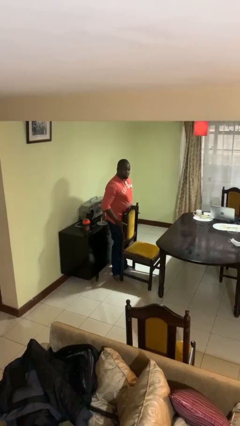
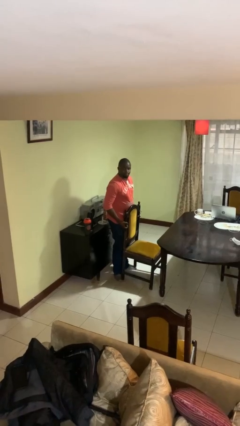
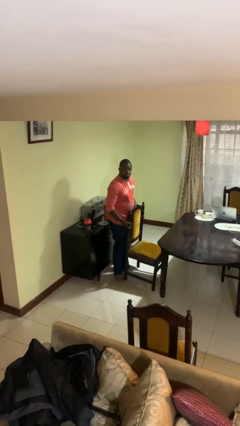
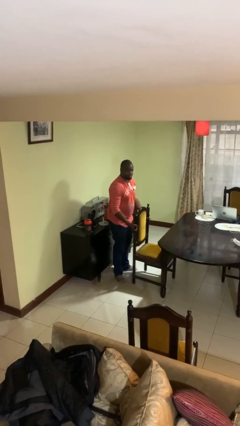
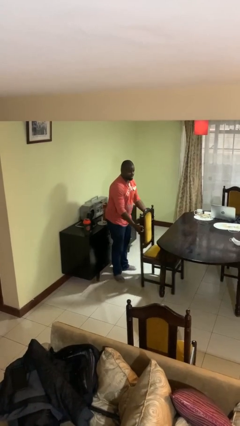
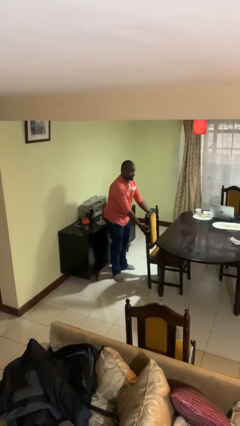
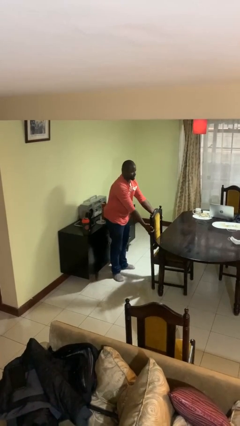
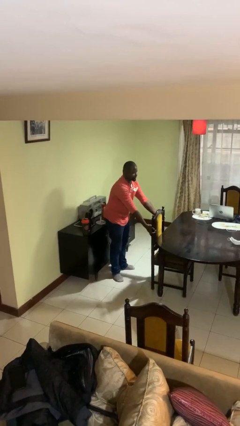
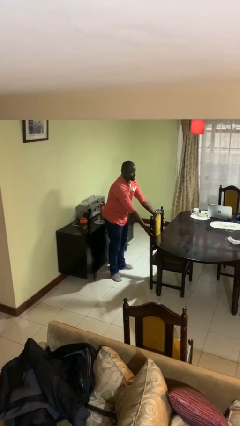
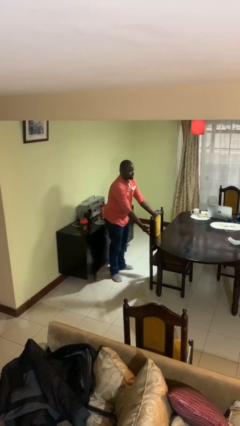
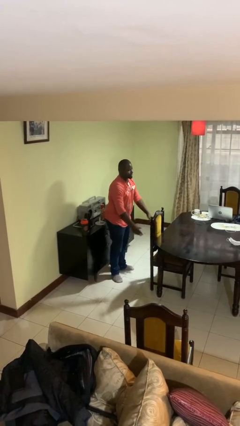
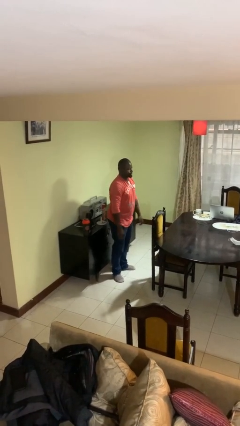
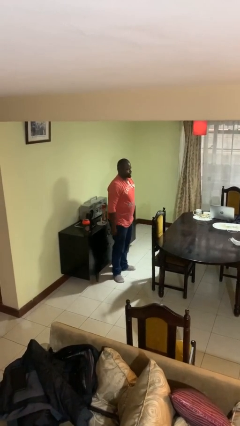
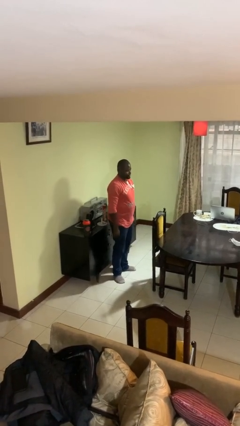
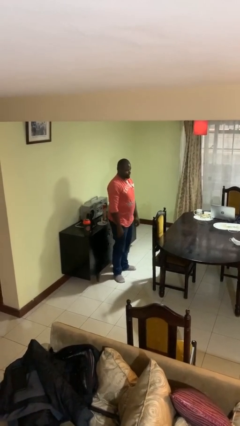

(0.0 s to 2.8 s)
person pushes in chair

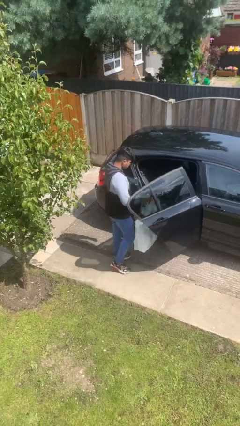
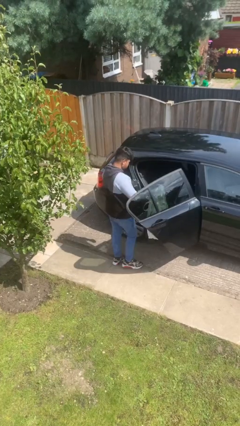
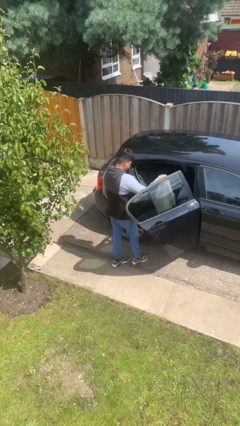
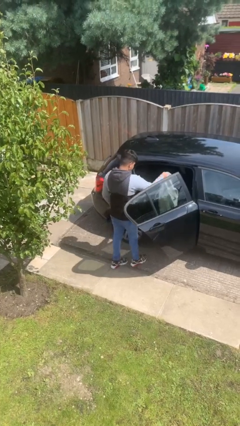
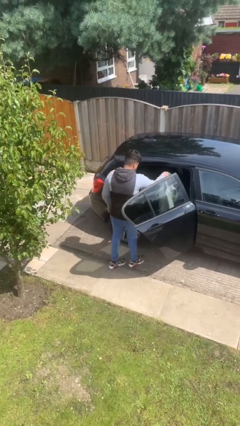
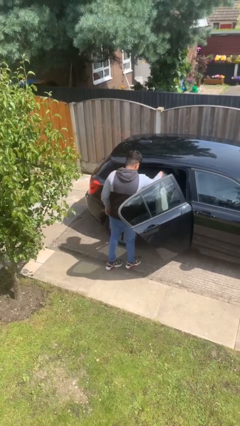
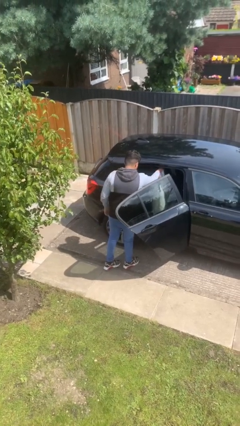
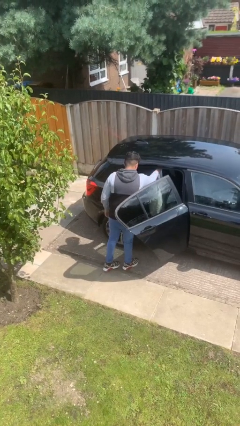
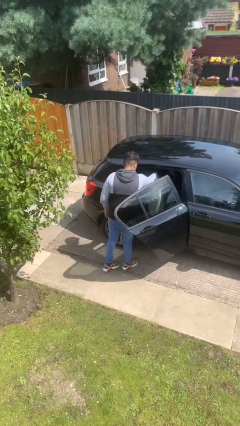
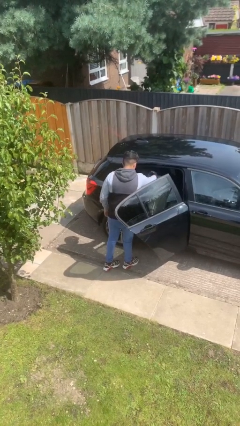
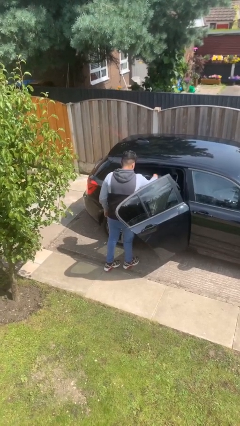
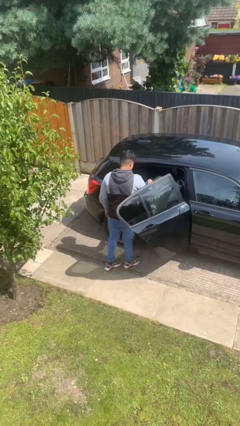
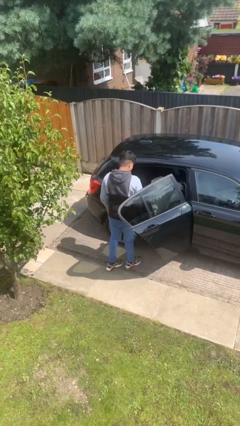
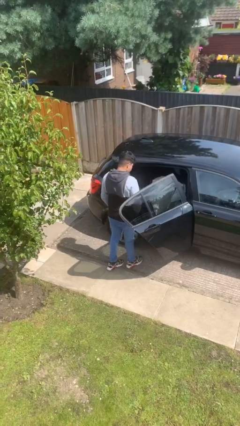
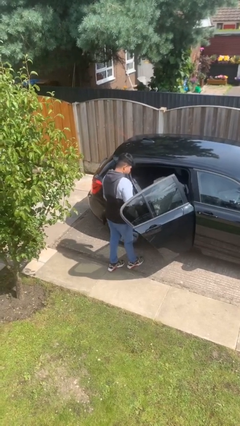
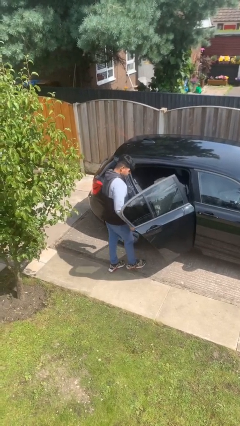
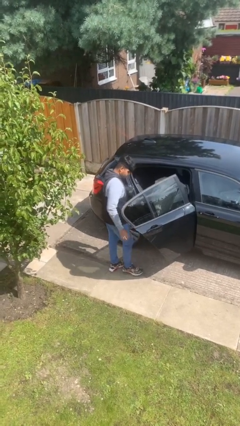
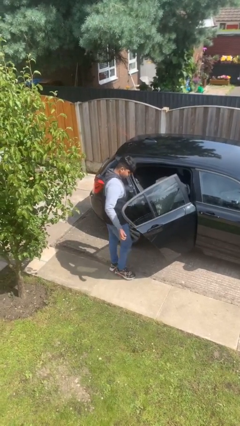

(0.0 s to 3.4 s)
person loads car

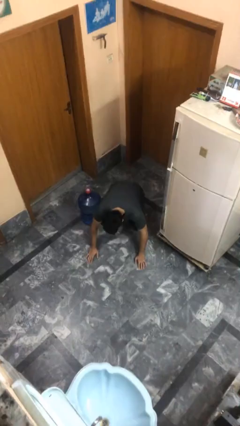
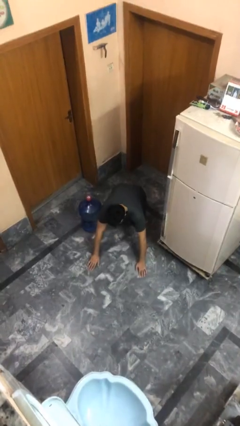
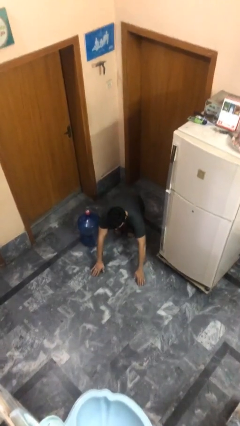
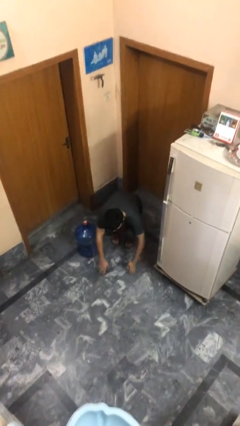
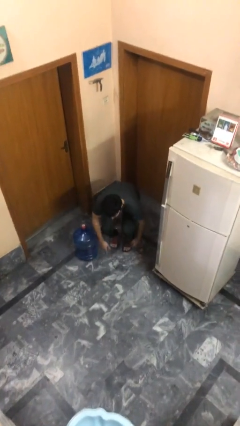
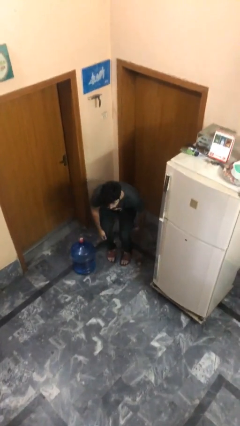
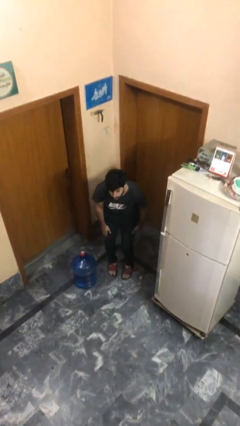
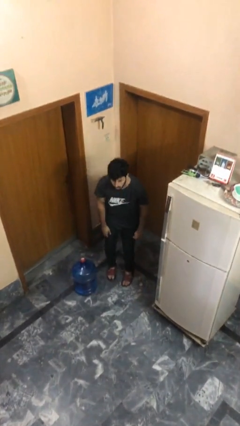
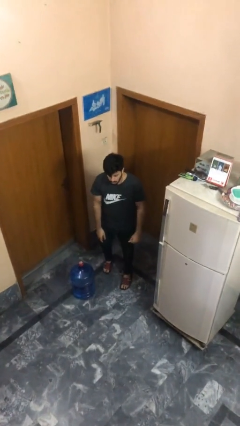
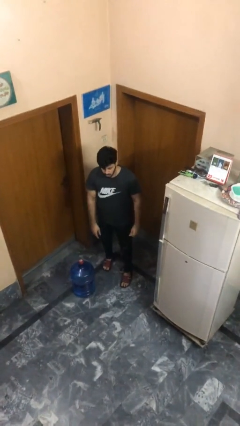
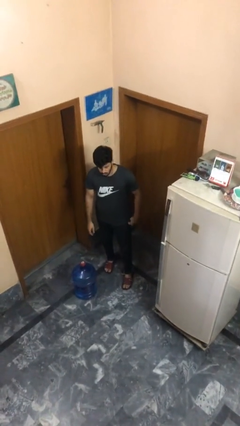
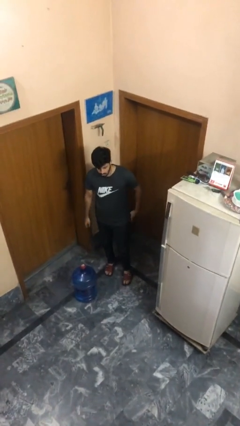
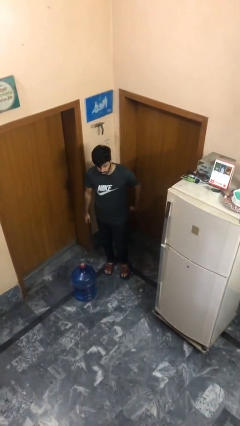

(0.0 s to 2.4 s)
person stands up from floor

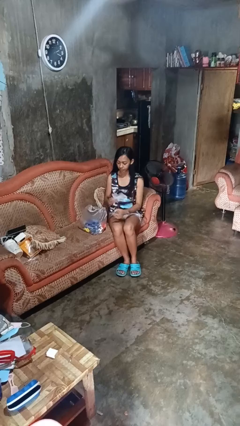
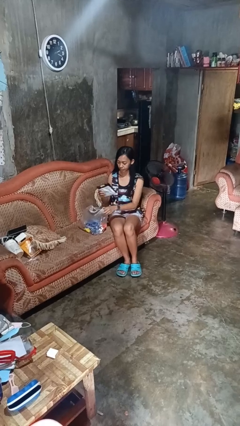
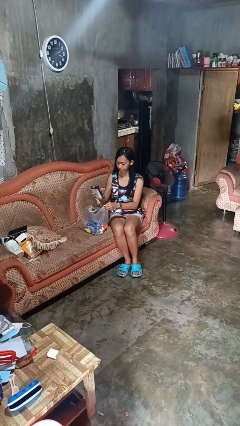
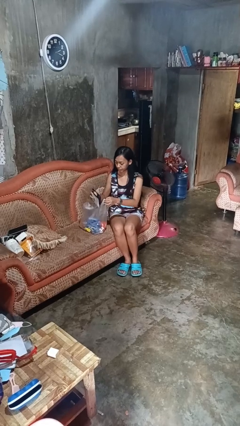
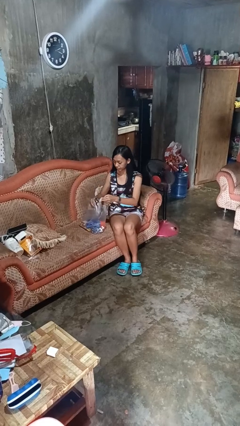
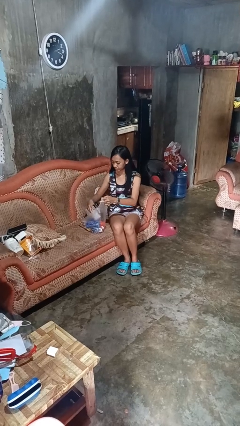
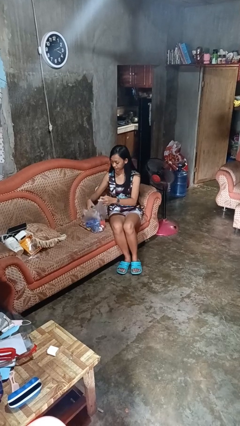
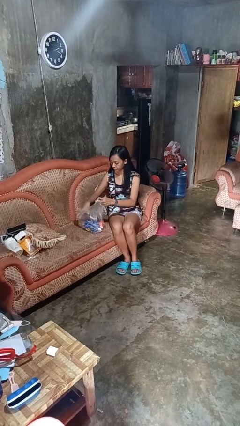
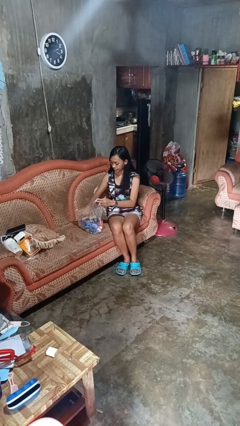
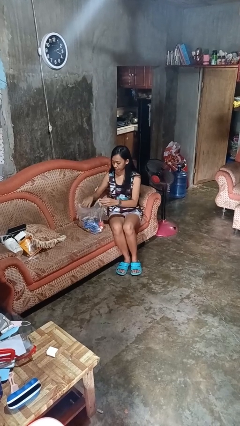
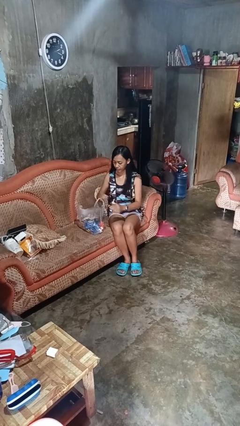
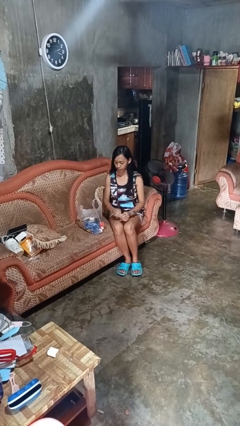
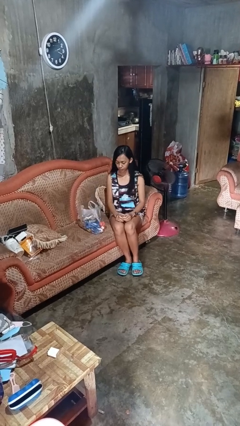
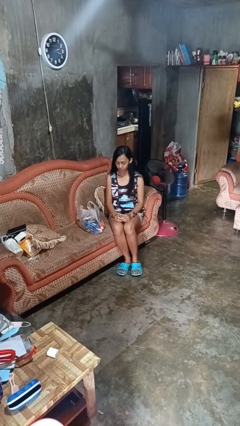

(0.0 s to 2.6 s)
person puts object into bag

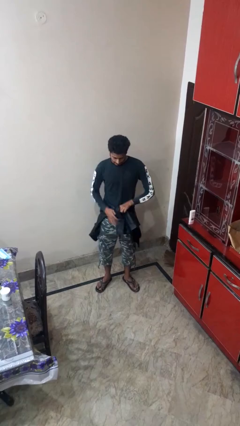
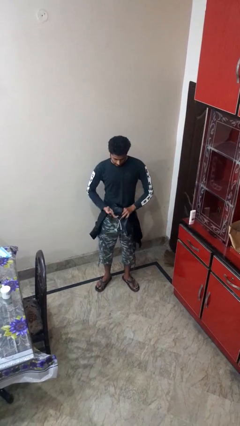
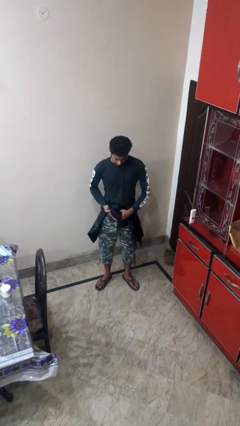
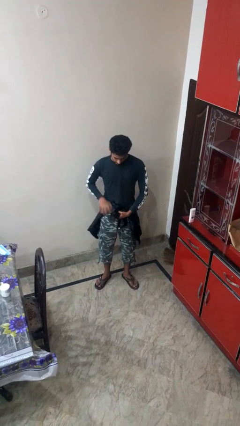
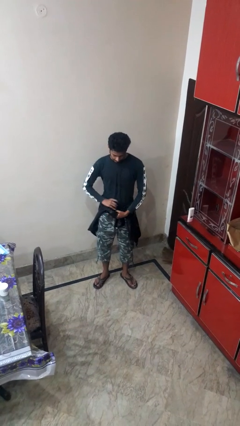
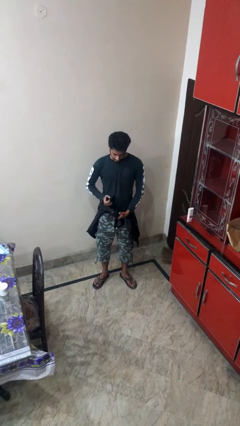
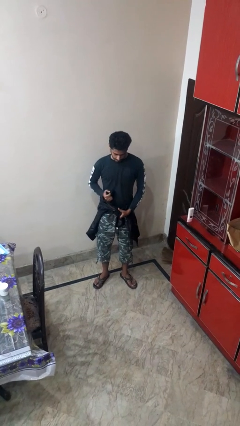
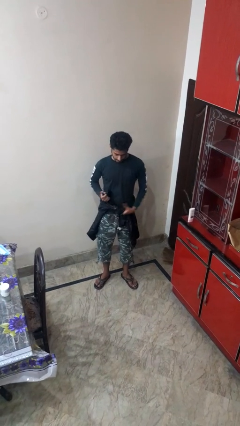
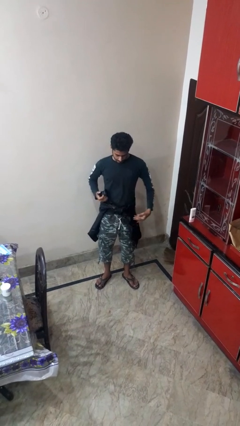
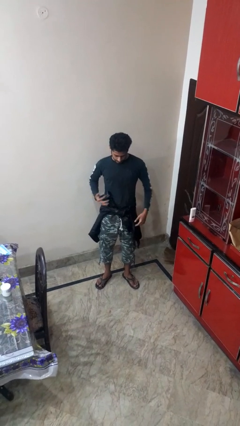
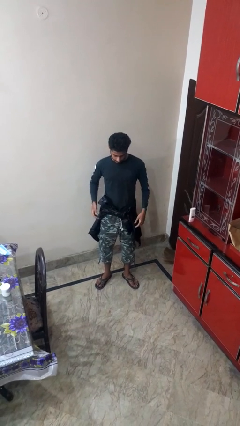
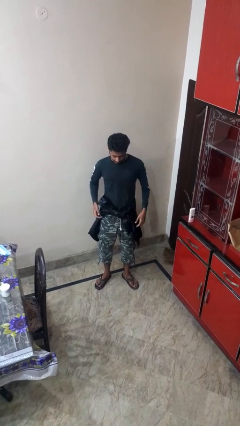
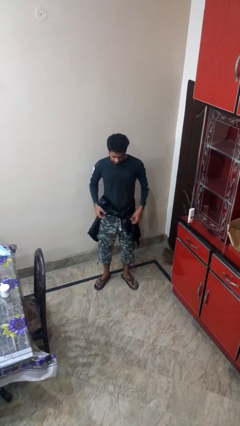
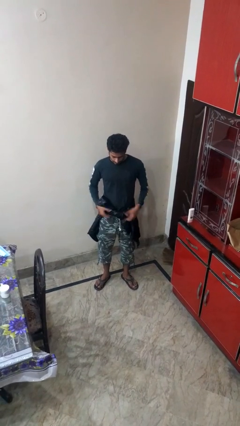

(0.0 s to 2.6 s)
person ties jacket around waist

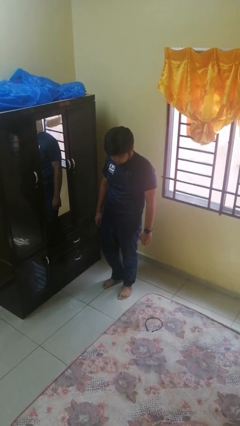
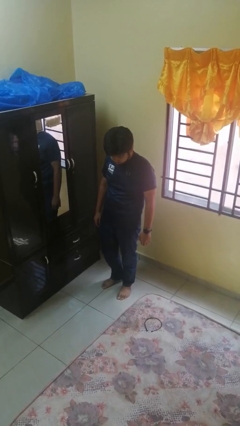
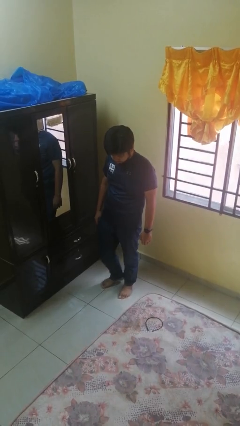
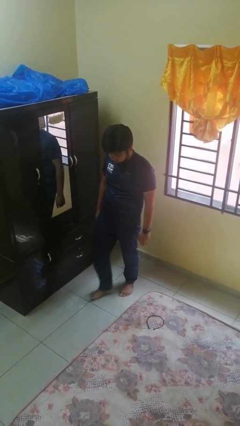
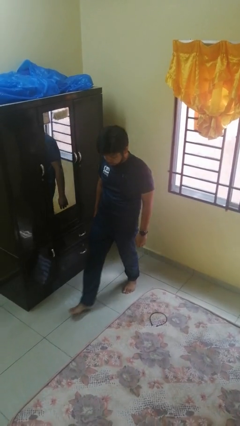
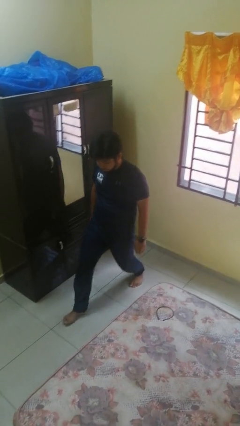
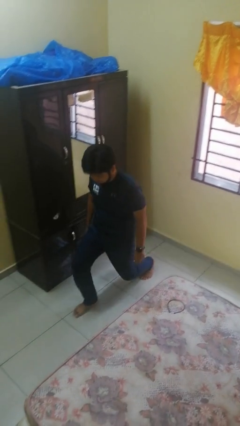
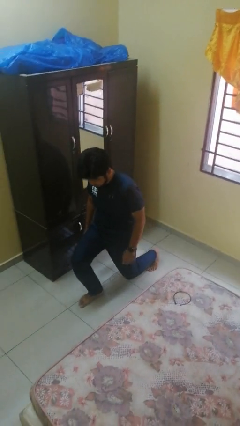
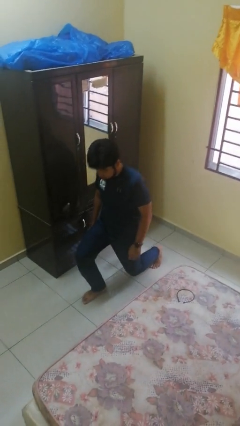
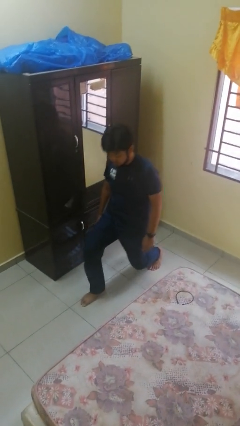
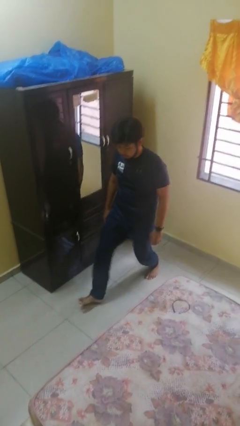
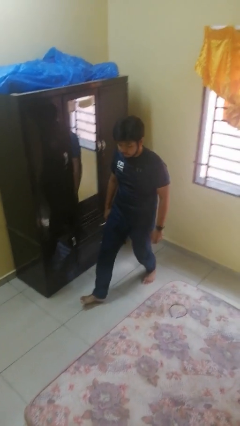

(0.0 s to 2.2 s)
person exercises with lunges

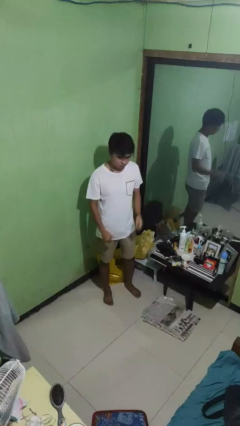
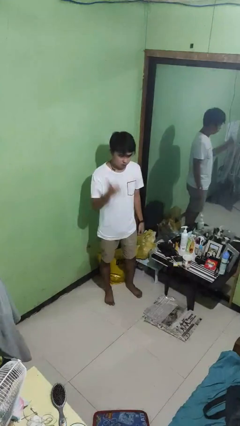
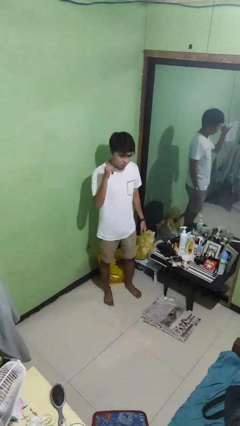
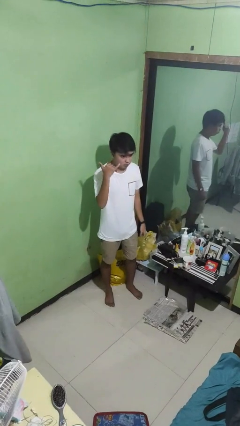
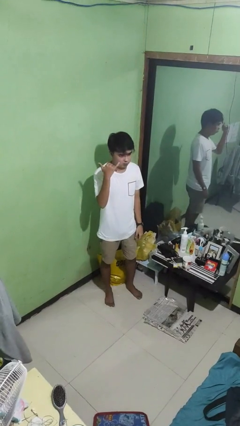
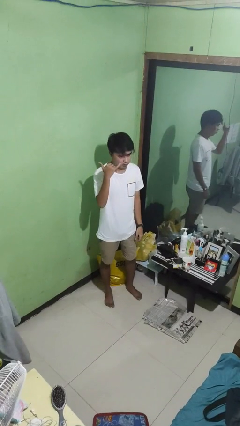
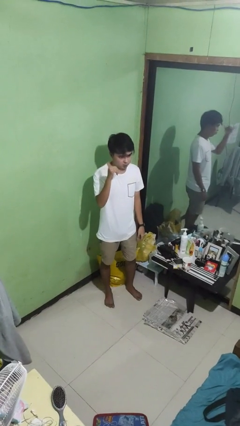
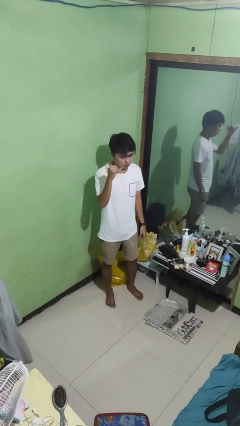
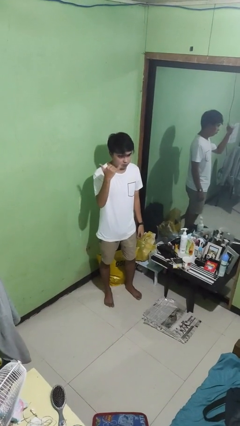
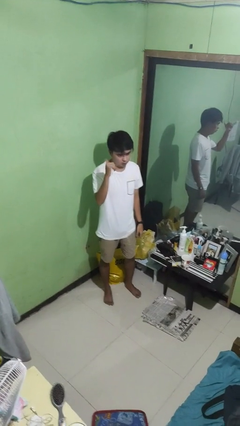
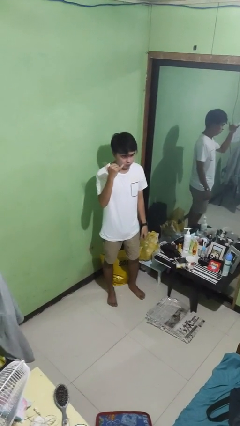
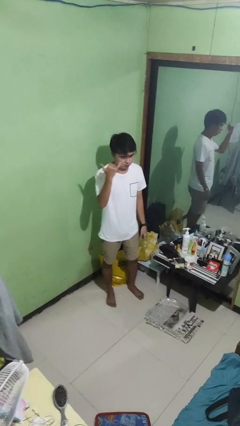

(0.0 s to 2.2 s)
person gestures hang loose
